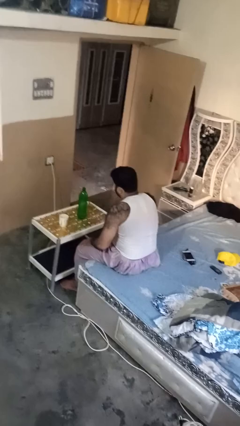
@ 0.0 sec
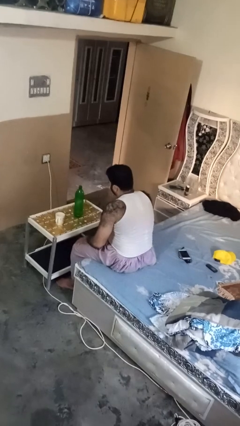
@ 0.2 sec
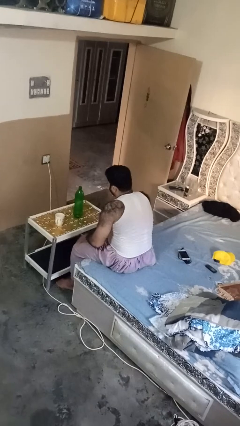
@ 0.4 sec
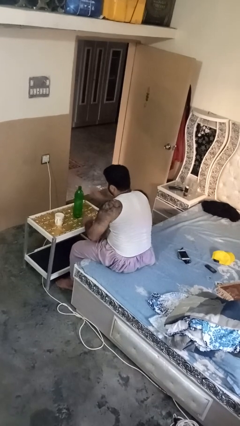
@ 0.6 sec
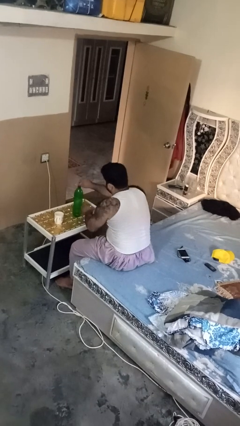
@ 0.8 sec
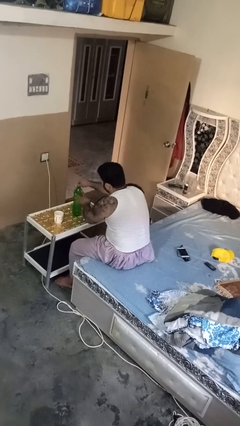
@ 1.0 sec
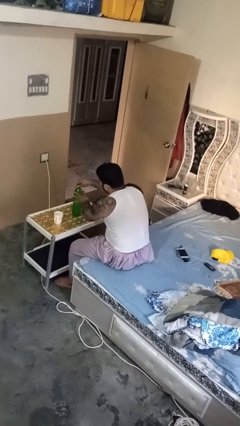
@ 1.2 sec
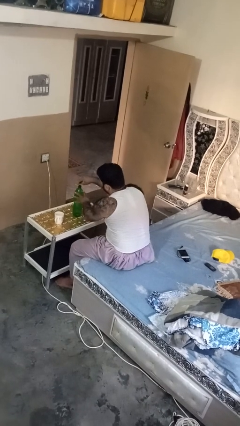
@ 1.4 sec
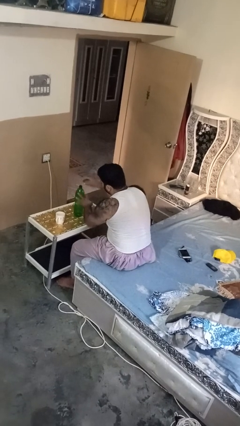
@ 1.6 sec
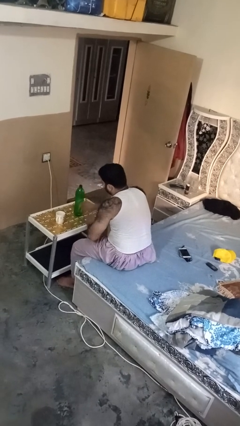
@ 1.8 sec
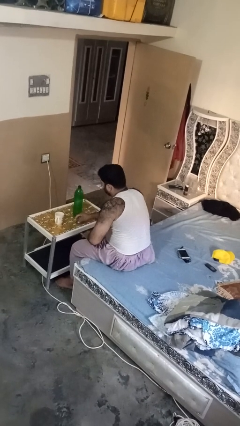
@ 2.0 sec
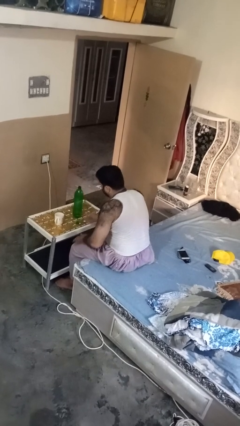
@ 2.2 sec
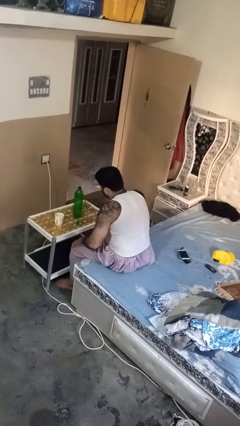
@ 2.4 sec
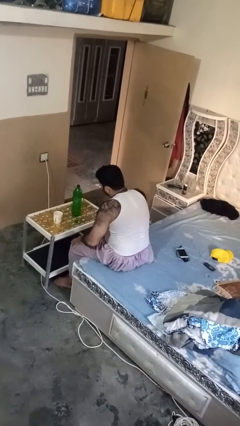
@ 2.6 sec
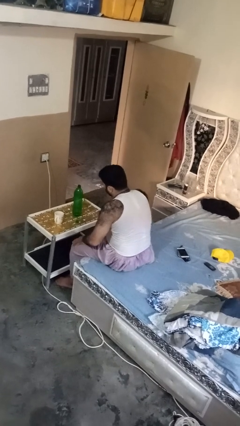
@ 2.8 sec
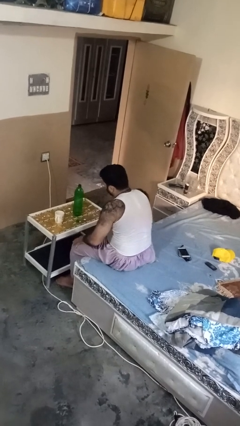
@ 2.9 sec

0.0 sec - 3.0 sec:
person unscrews lid from bottle

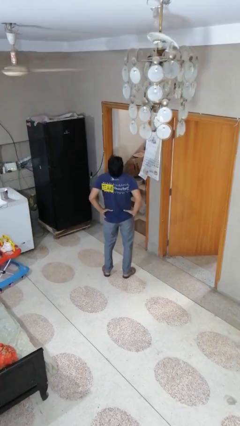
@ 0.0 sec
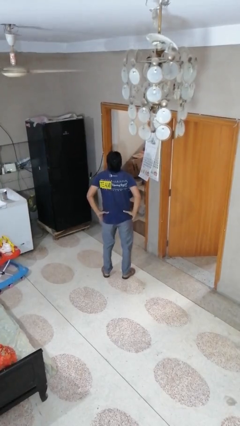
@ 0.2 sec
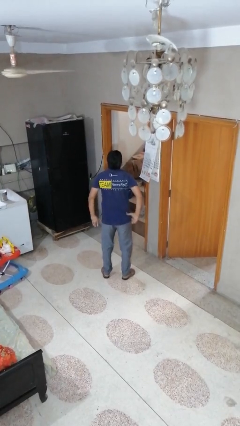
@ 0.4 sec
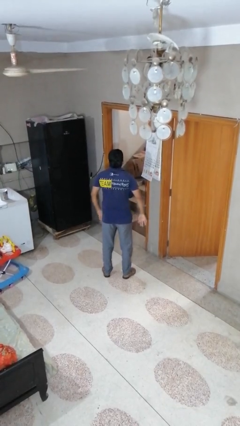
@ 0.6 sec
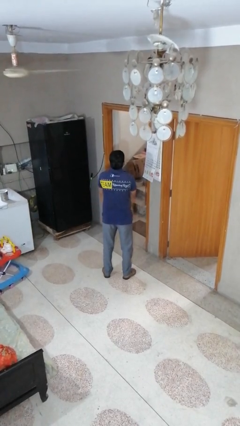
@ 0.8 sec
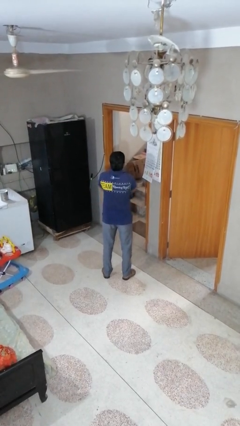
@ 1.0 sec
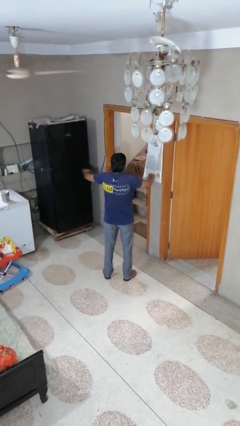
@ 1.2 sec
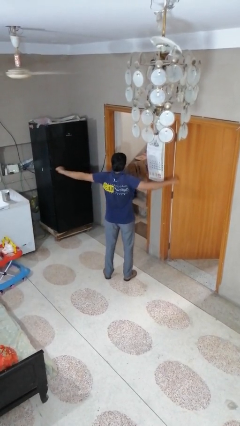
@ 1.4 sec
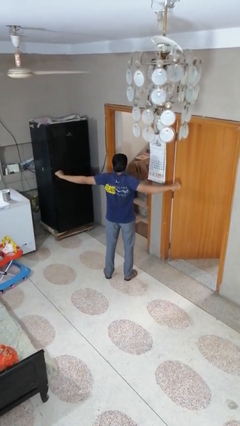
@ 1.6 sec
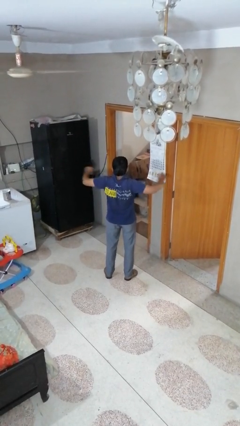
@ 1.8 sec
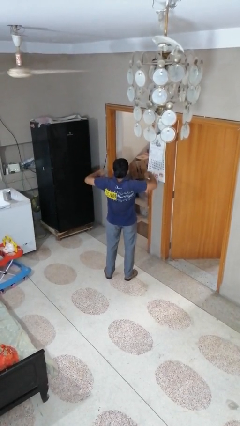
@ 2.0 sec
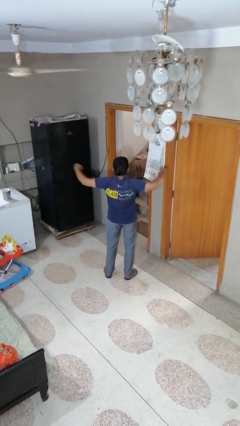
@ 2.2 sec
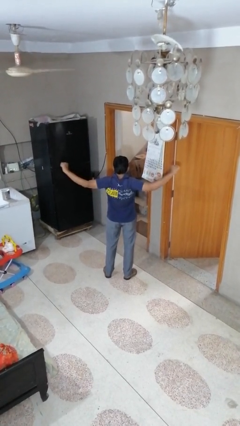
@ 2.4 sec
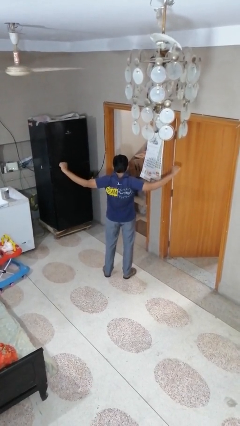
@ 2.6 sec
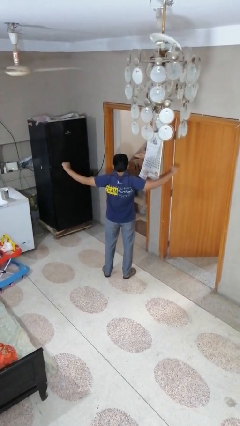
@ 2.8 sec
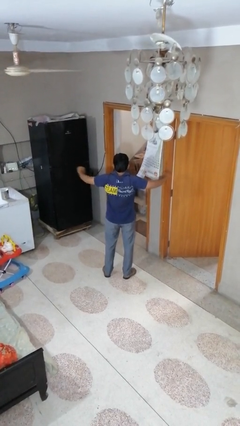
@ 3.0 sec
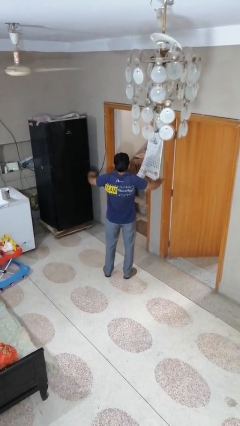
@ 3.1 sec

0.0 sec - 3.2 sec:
person stretches arms to side

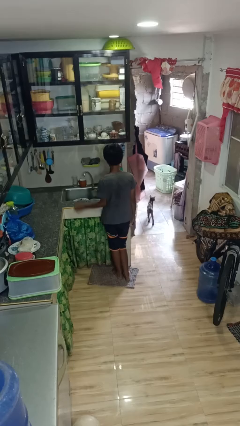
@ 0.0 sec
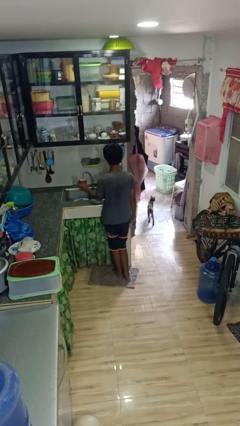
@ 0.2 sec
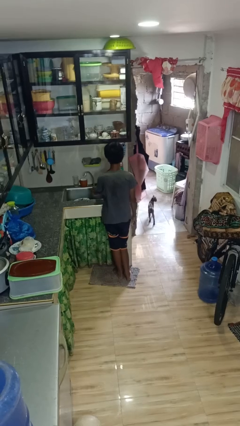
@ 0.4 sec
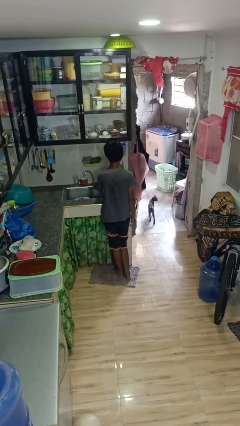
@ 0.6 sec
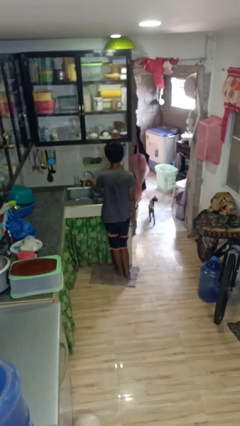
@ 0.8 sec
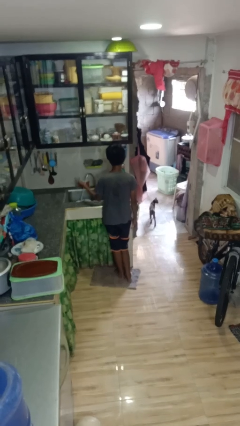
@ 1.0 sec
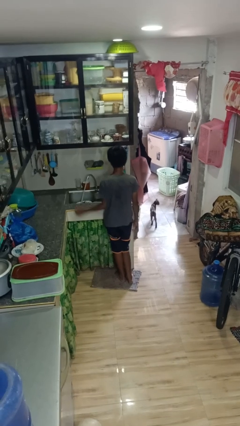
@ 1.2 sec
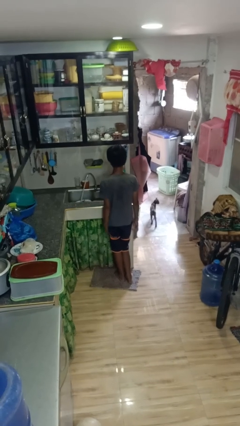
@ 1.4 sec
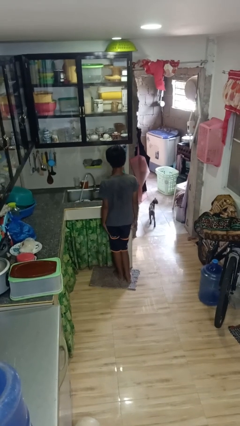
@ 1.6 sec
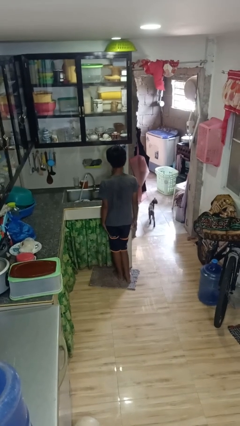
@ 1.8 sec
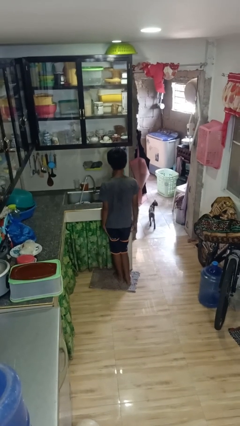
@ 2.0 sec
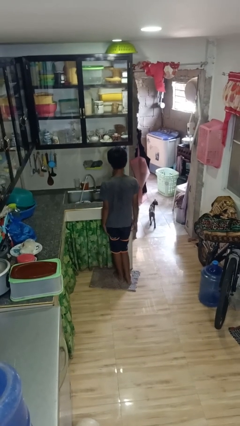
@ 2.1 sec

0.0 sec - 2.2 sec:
person turns on faucet

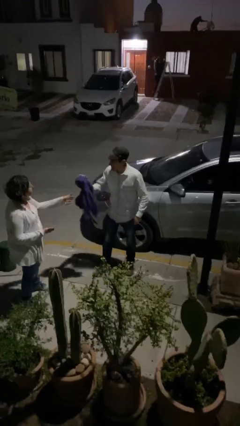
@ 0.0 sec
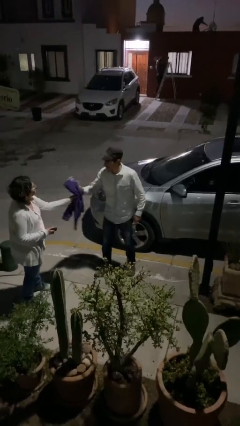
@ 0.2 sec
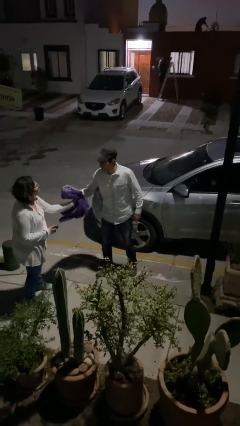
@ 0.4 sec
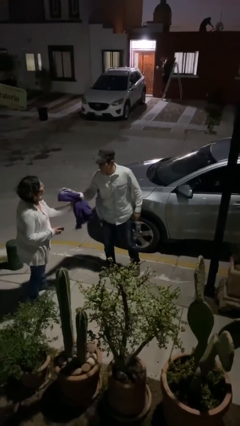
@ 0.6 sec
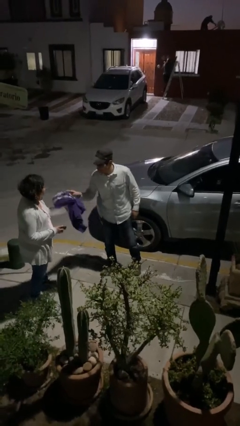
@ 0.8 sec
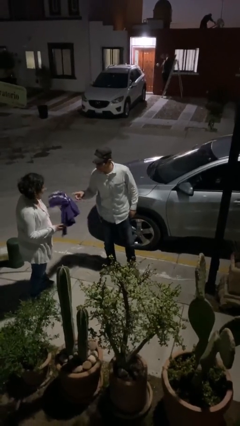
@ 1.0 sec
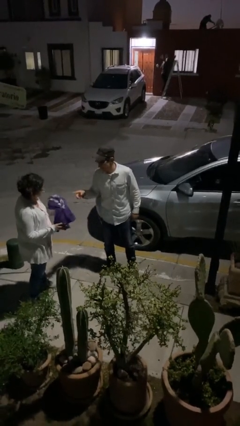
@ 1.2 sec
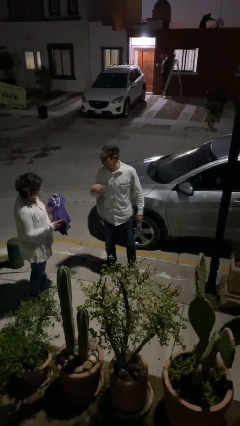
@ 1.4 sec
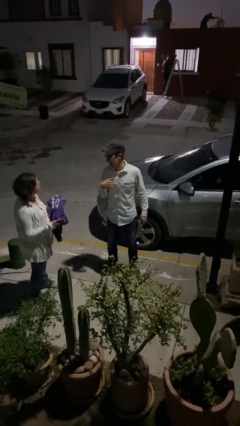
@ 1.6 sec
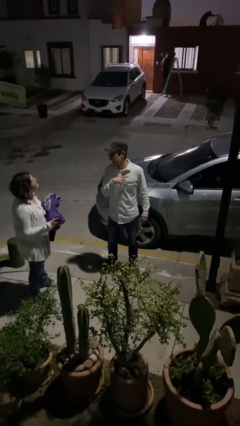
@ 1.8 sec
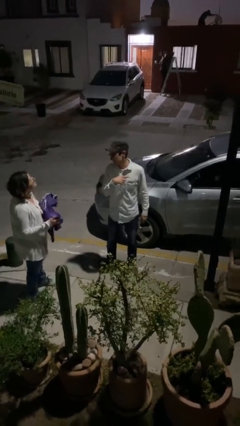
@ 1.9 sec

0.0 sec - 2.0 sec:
person transfers object to person

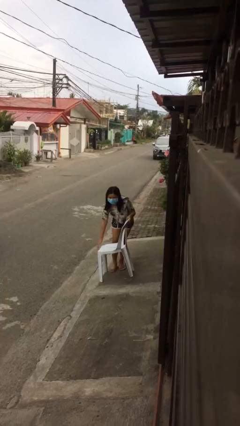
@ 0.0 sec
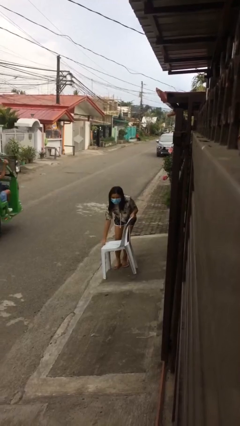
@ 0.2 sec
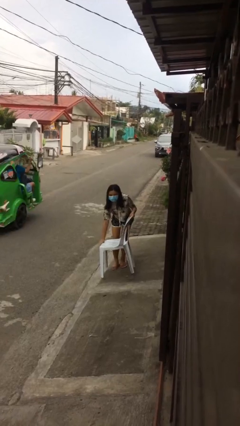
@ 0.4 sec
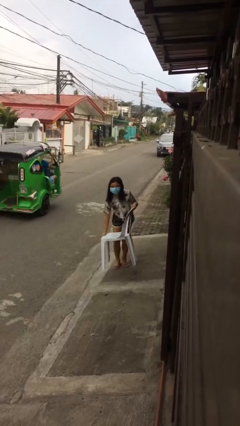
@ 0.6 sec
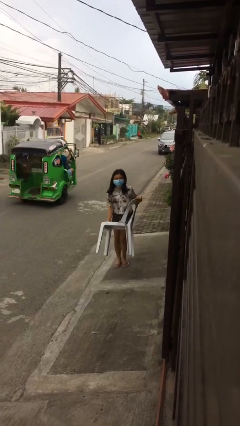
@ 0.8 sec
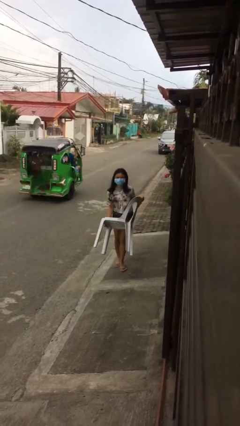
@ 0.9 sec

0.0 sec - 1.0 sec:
person picks up object from floor

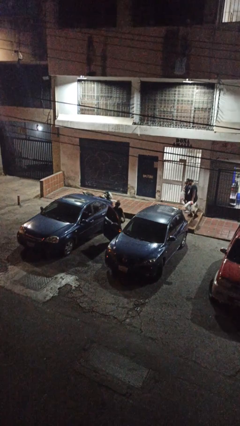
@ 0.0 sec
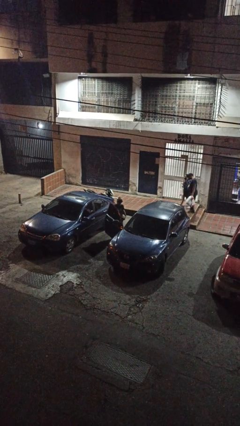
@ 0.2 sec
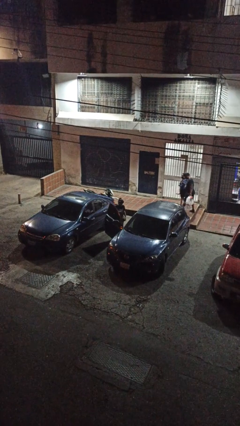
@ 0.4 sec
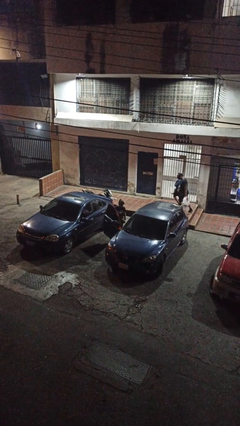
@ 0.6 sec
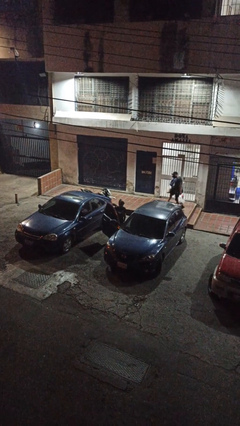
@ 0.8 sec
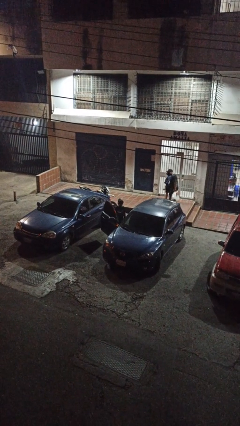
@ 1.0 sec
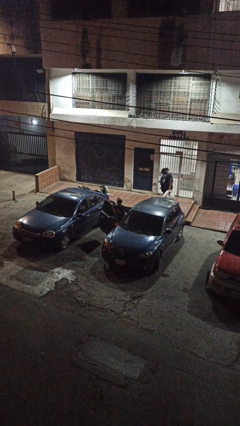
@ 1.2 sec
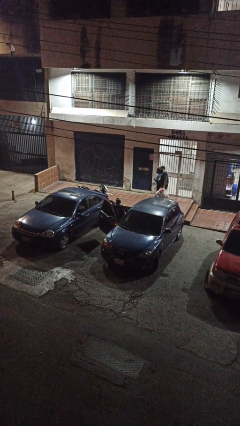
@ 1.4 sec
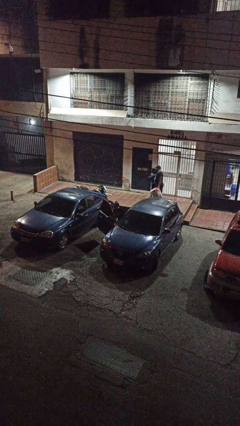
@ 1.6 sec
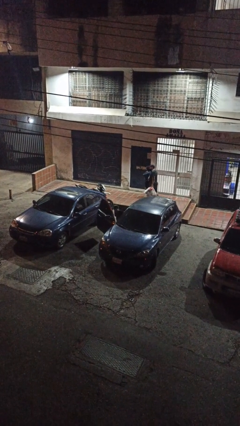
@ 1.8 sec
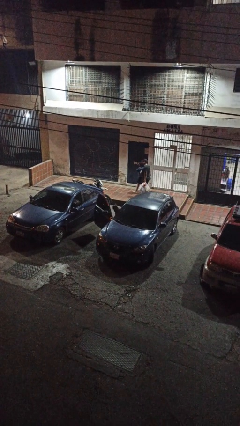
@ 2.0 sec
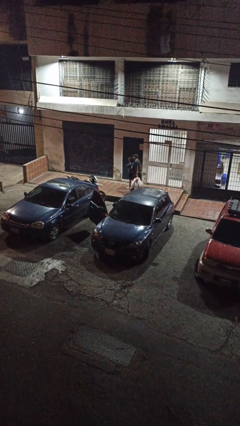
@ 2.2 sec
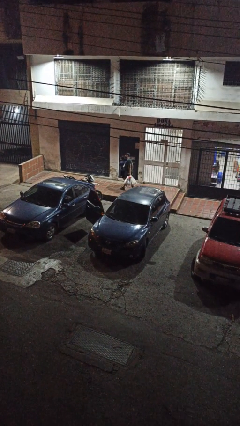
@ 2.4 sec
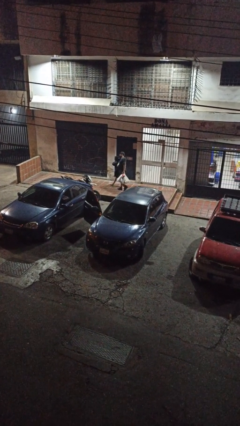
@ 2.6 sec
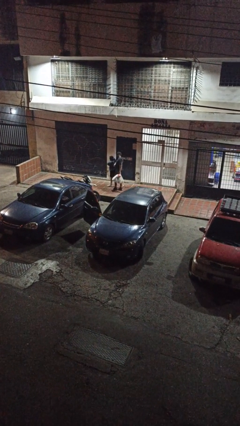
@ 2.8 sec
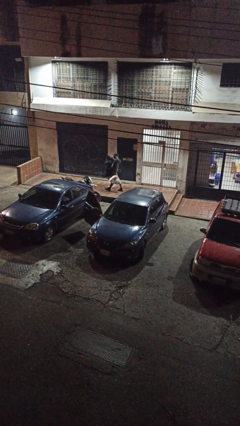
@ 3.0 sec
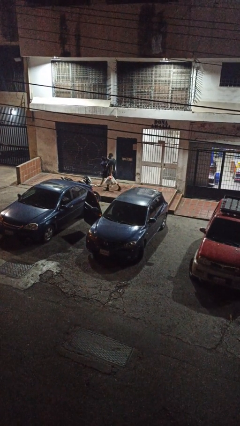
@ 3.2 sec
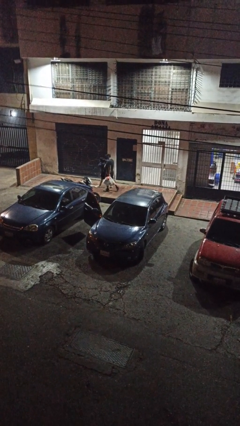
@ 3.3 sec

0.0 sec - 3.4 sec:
person enters car

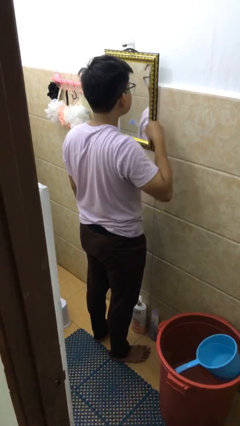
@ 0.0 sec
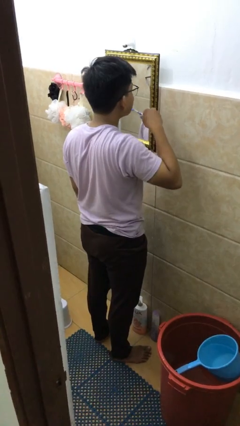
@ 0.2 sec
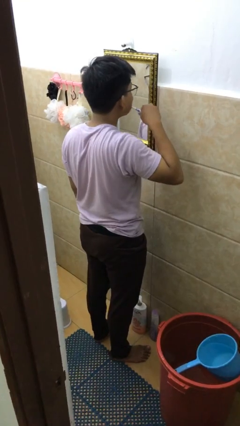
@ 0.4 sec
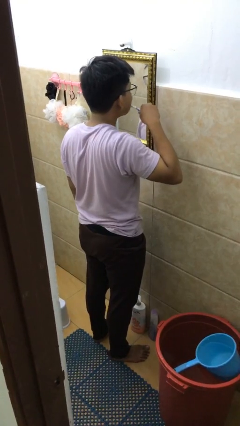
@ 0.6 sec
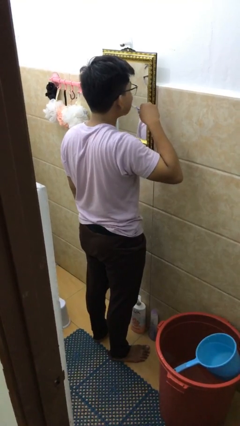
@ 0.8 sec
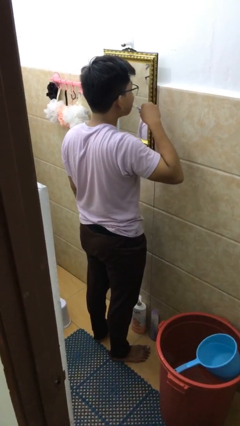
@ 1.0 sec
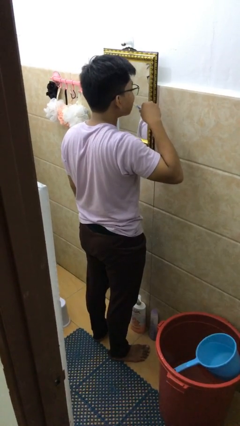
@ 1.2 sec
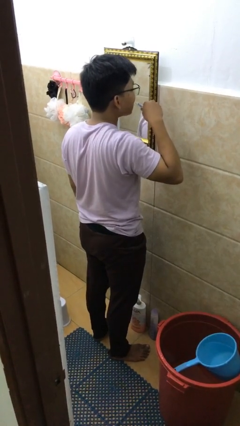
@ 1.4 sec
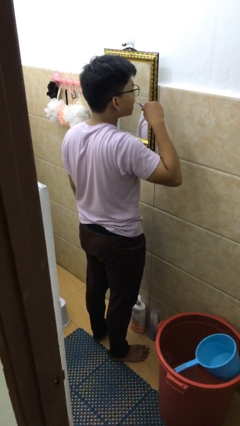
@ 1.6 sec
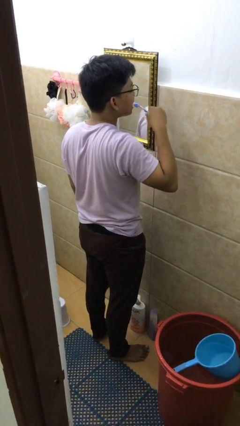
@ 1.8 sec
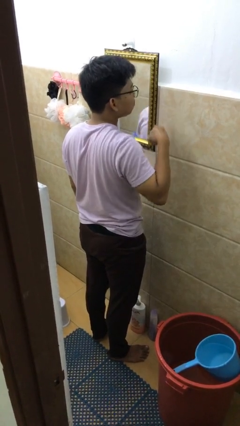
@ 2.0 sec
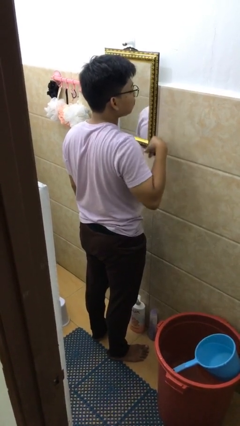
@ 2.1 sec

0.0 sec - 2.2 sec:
person brushes teeth
